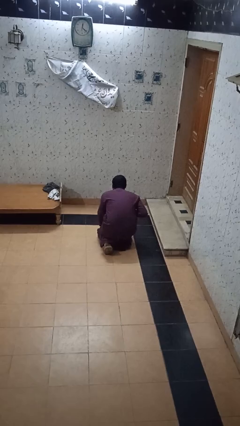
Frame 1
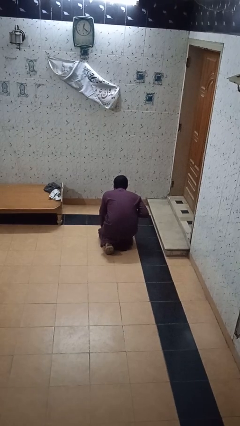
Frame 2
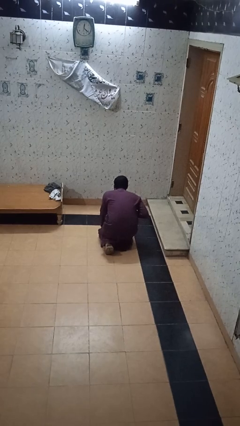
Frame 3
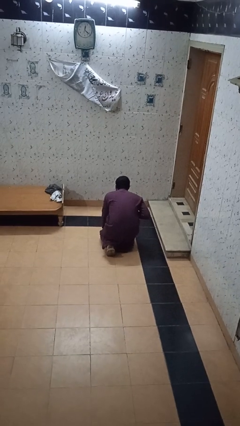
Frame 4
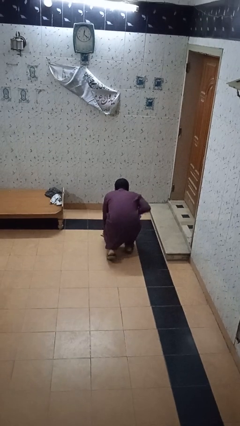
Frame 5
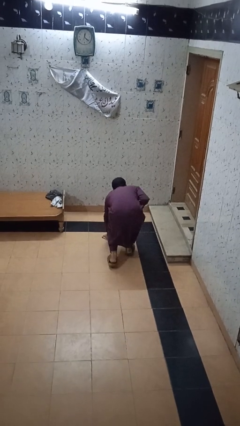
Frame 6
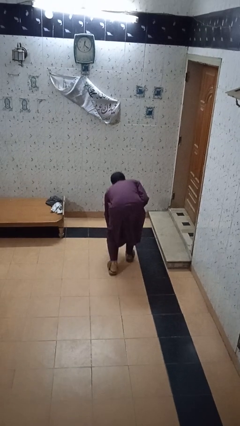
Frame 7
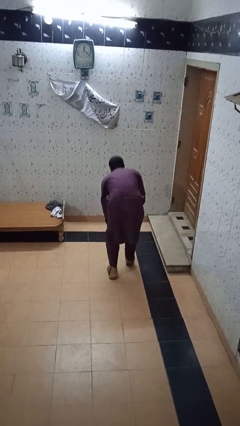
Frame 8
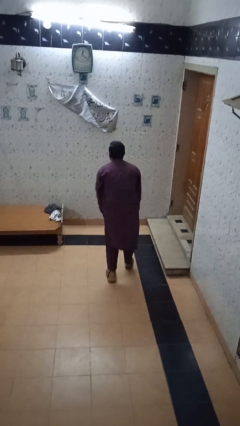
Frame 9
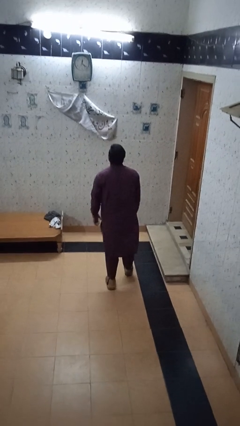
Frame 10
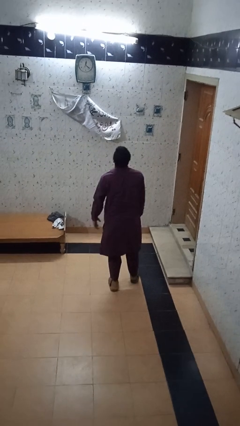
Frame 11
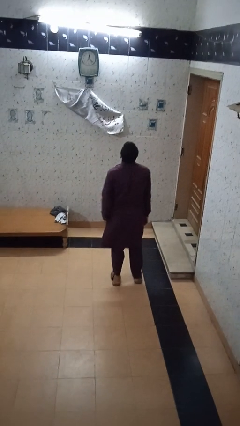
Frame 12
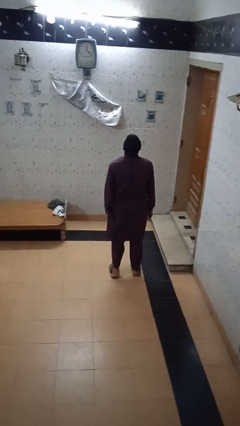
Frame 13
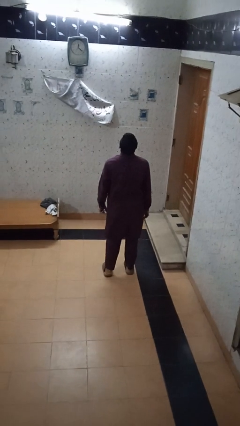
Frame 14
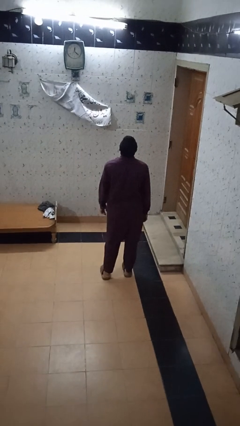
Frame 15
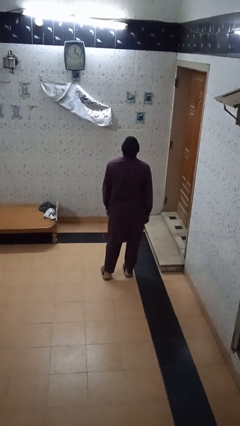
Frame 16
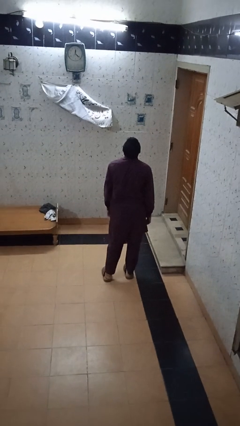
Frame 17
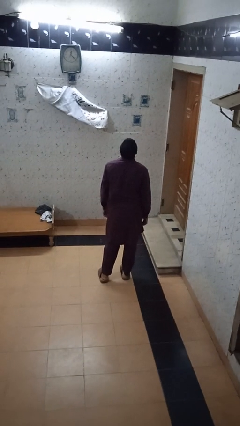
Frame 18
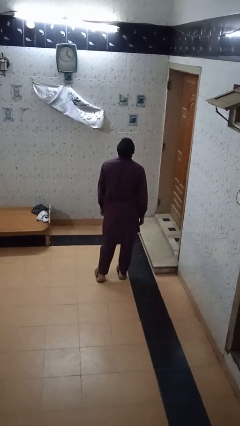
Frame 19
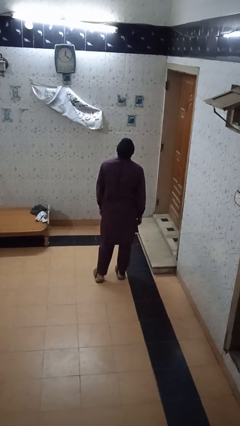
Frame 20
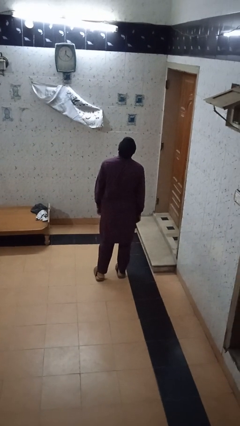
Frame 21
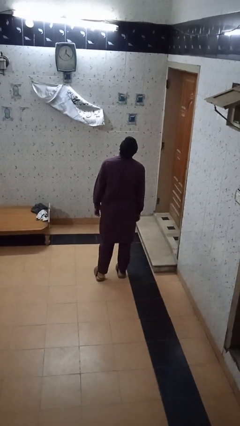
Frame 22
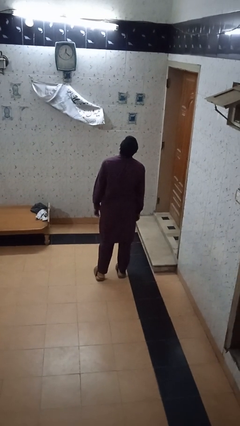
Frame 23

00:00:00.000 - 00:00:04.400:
person stands up from floor

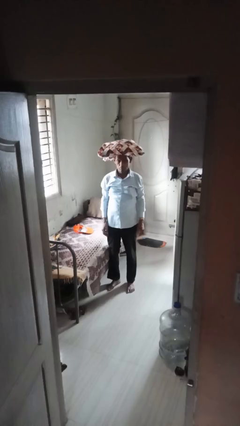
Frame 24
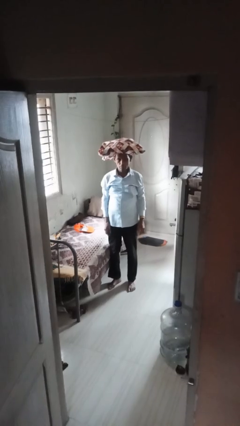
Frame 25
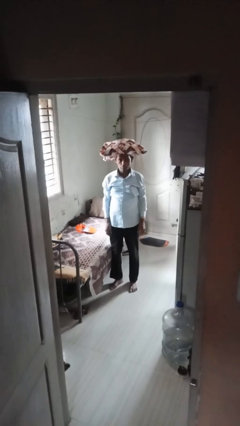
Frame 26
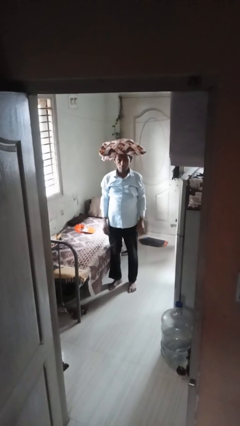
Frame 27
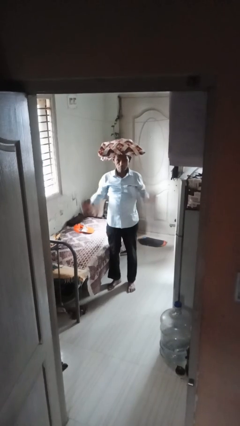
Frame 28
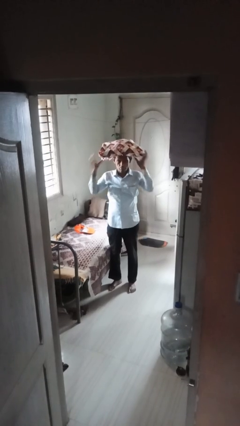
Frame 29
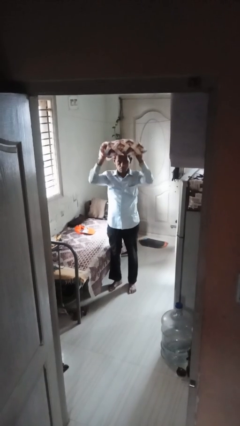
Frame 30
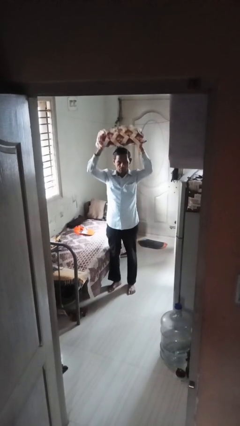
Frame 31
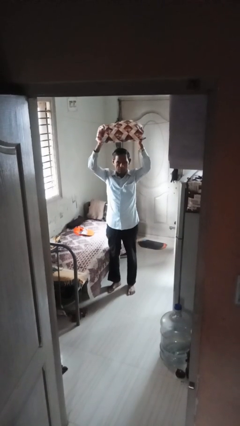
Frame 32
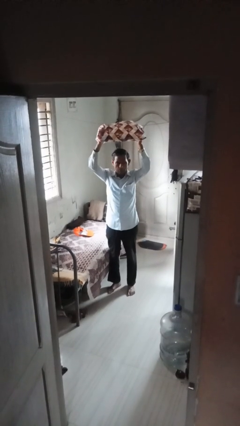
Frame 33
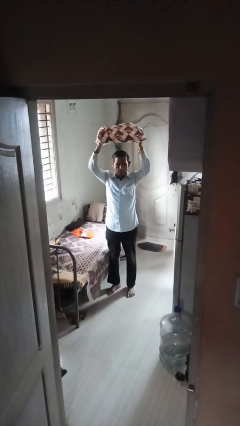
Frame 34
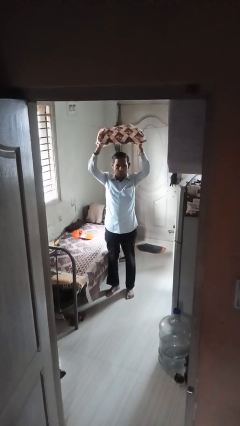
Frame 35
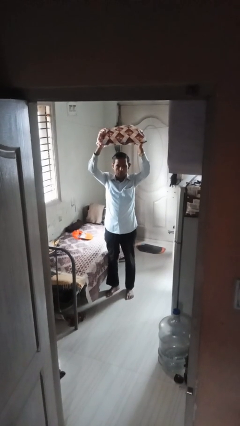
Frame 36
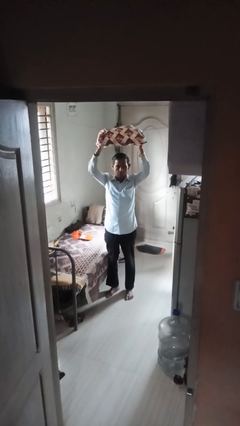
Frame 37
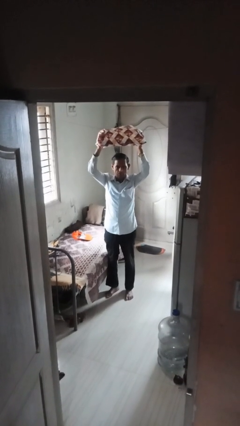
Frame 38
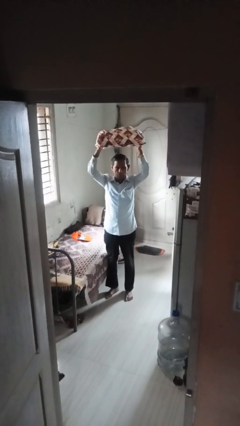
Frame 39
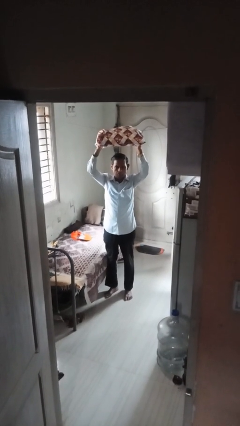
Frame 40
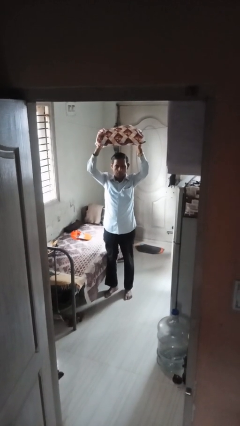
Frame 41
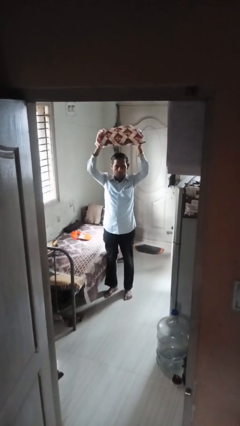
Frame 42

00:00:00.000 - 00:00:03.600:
person holds object above head

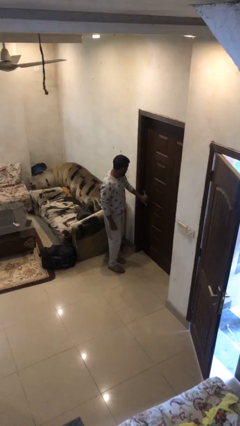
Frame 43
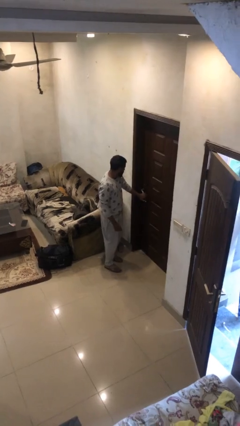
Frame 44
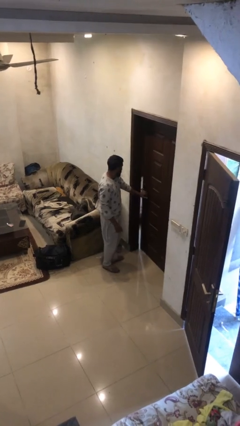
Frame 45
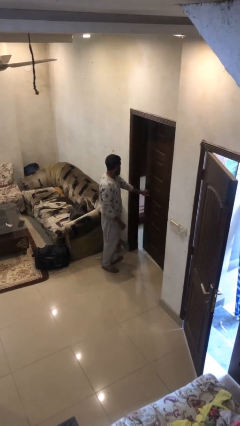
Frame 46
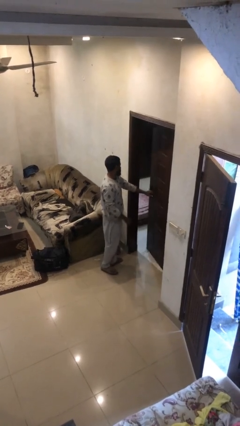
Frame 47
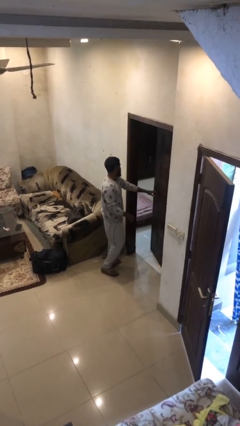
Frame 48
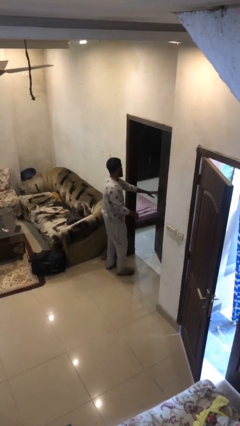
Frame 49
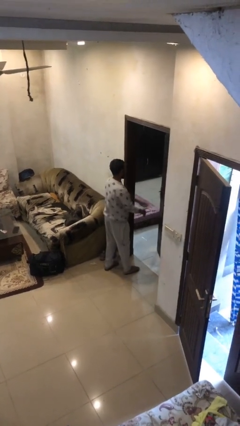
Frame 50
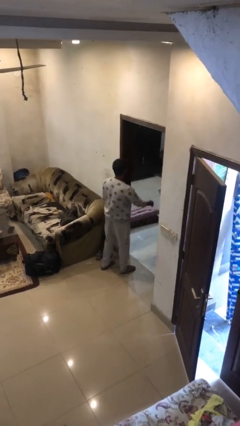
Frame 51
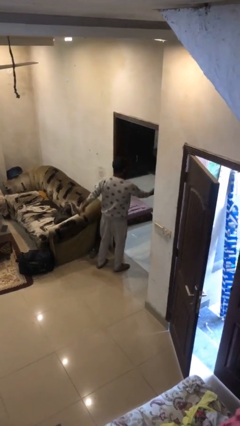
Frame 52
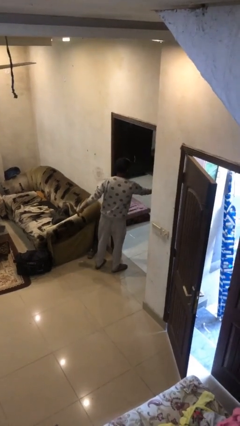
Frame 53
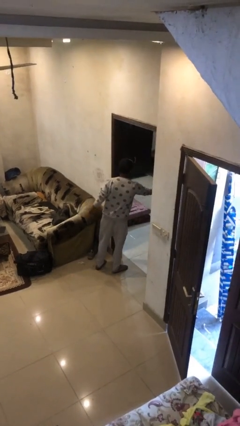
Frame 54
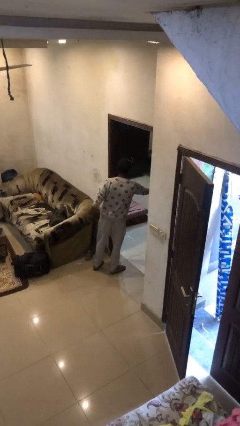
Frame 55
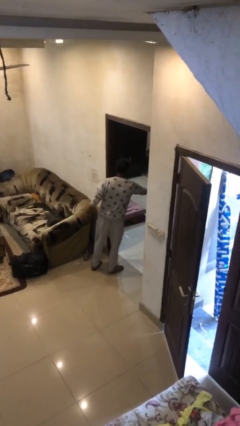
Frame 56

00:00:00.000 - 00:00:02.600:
person opens facility door

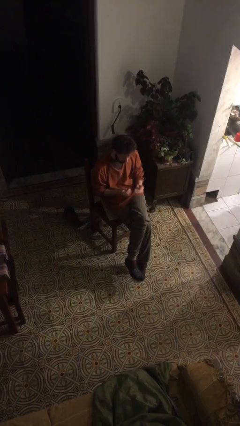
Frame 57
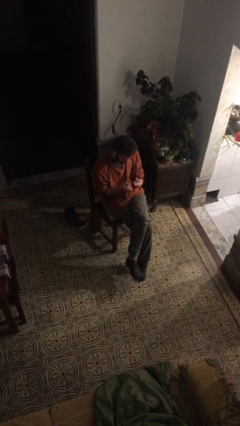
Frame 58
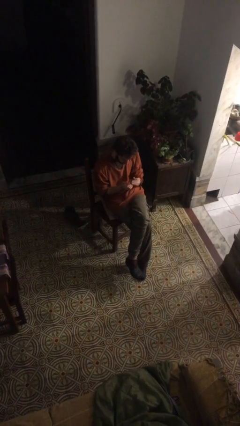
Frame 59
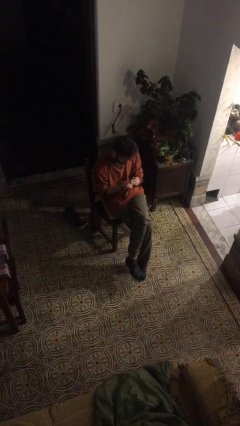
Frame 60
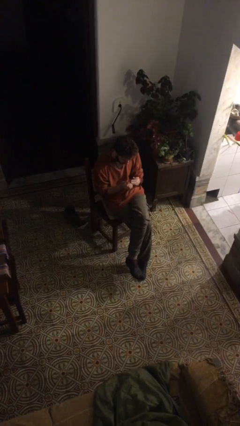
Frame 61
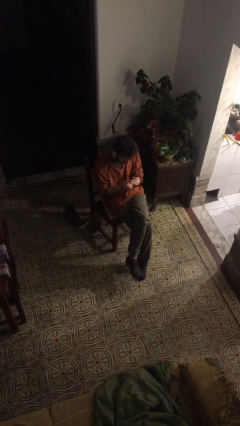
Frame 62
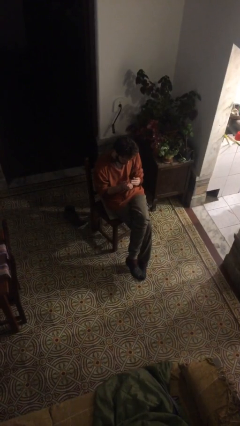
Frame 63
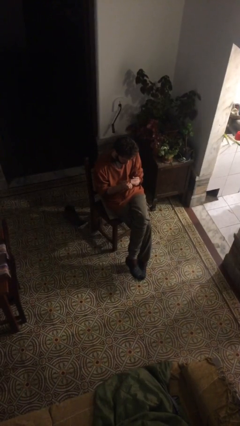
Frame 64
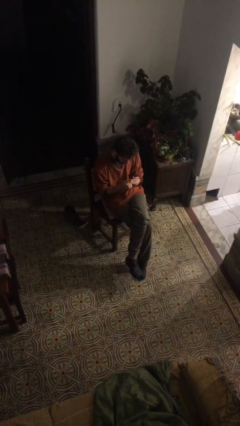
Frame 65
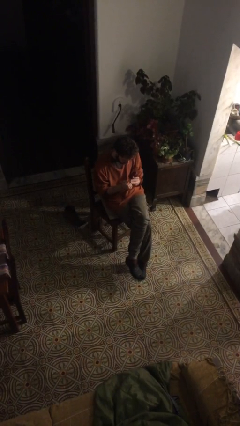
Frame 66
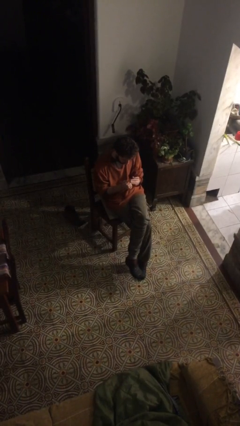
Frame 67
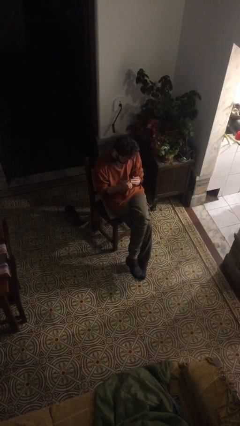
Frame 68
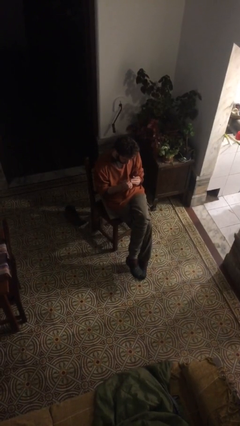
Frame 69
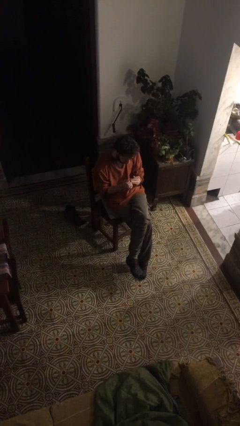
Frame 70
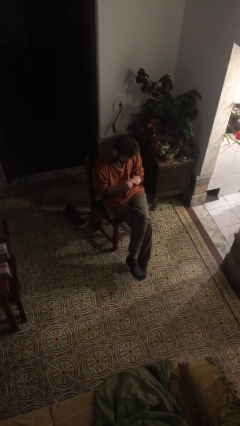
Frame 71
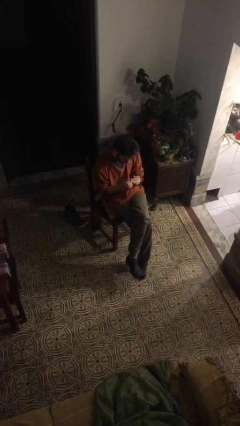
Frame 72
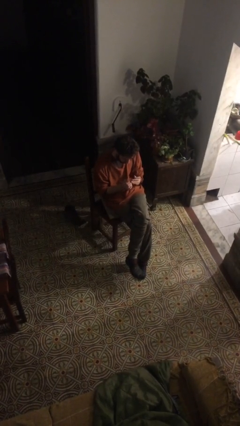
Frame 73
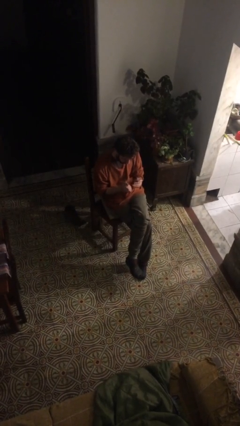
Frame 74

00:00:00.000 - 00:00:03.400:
person clips fingernails

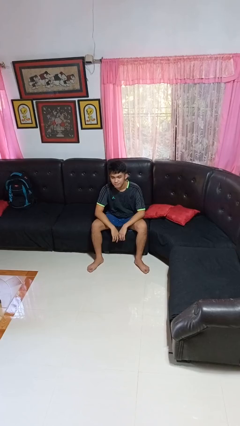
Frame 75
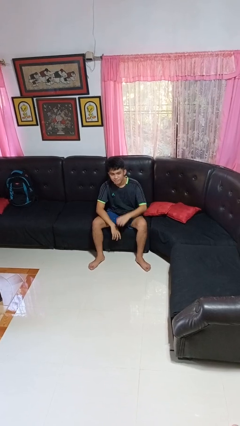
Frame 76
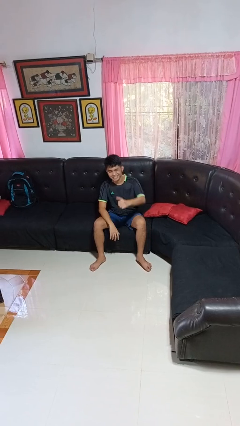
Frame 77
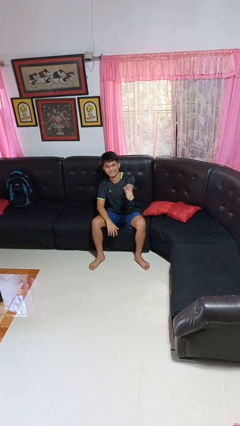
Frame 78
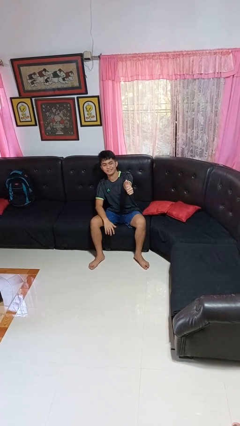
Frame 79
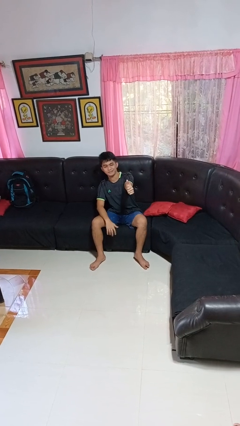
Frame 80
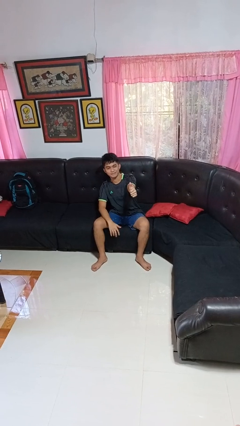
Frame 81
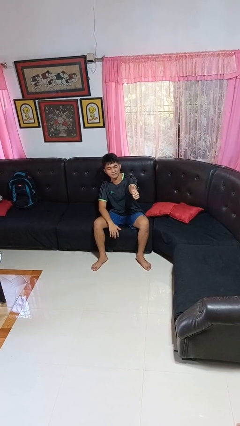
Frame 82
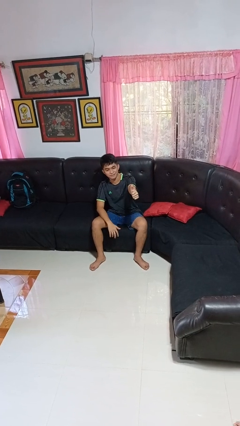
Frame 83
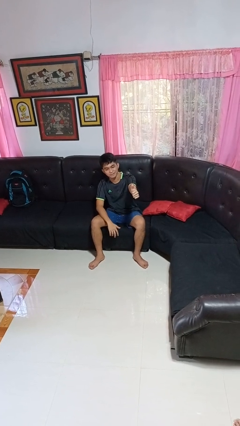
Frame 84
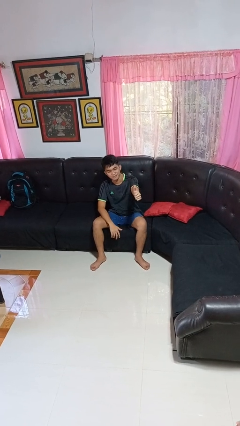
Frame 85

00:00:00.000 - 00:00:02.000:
person gestures thumbs up

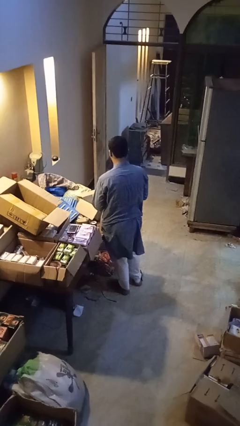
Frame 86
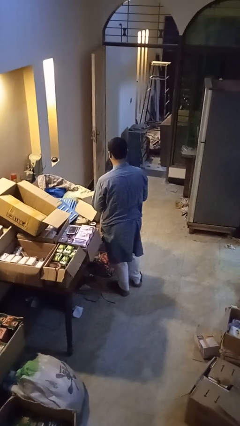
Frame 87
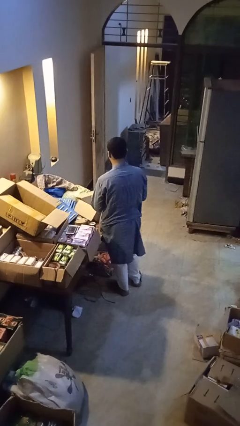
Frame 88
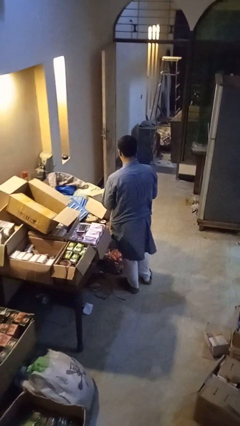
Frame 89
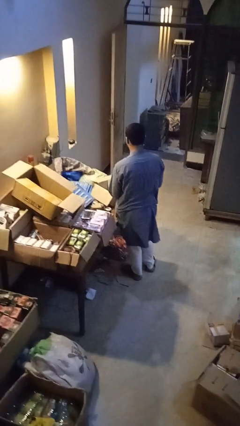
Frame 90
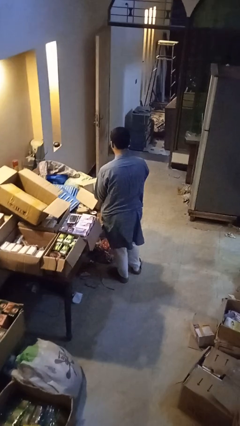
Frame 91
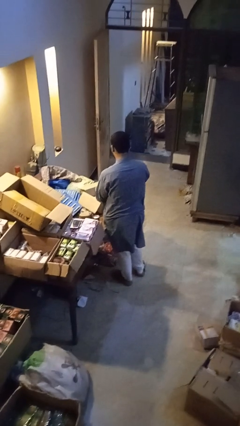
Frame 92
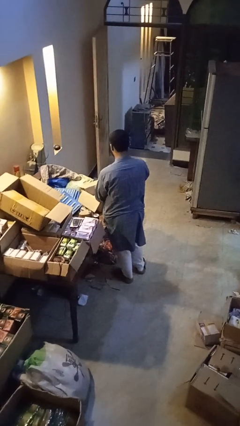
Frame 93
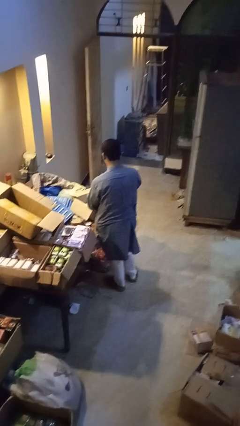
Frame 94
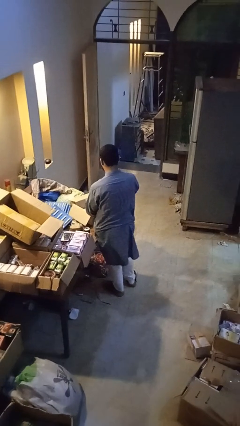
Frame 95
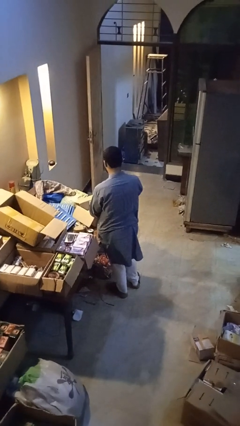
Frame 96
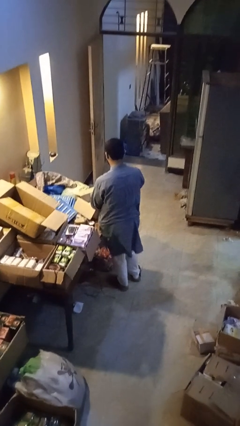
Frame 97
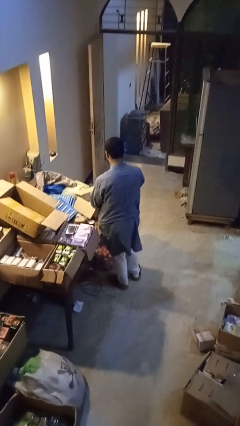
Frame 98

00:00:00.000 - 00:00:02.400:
person puts object into box
